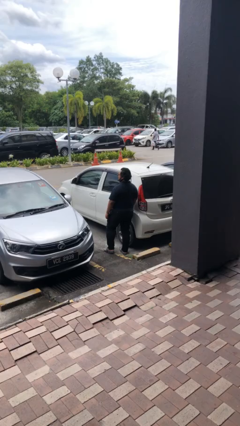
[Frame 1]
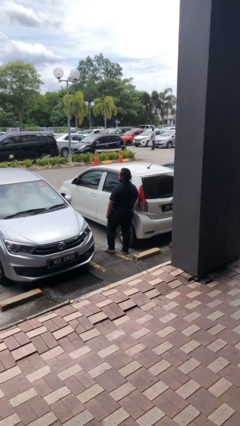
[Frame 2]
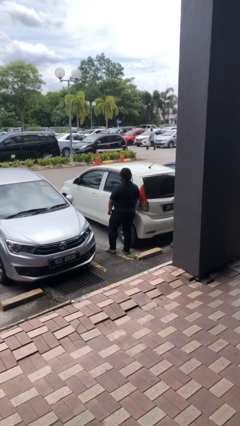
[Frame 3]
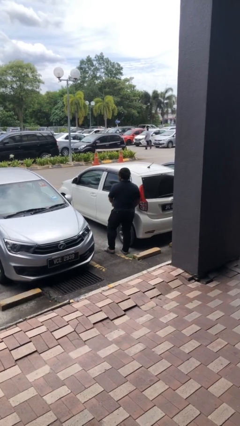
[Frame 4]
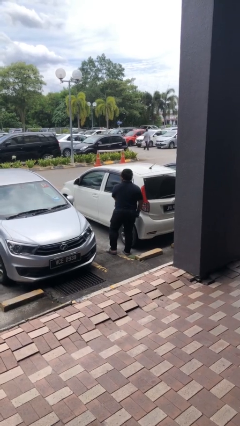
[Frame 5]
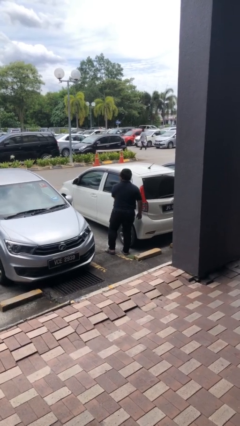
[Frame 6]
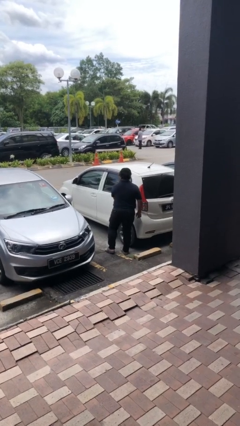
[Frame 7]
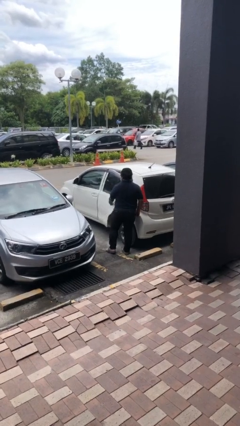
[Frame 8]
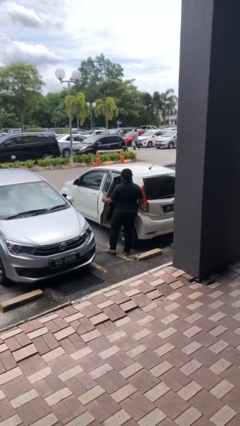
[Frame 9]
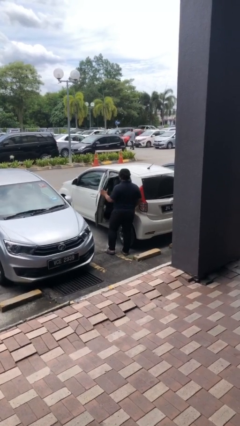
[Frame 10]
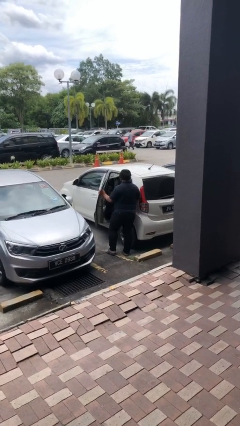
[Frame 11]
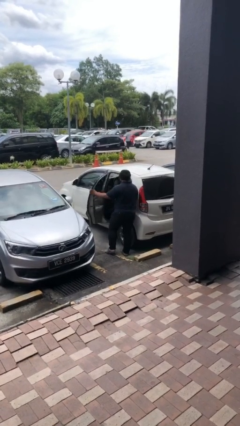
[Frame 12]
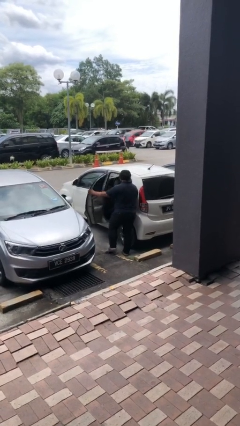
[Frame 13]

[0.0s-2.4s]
person opens car door

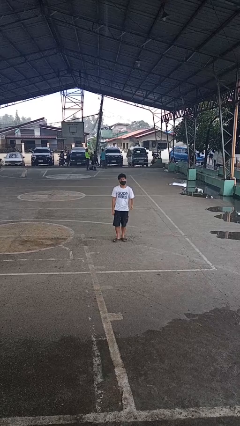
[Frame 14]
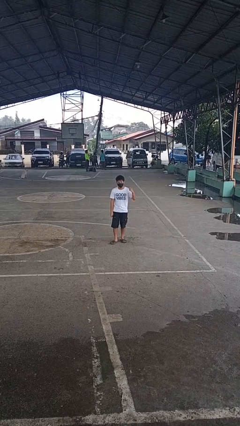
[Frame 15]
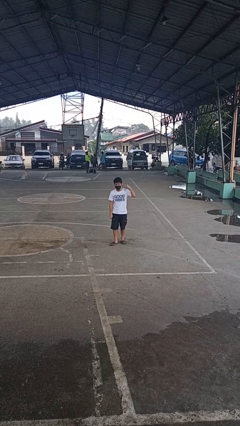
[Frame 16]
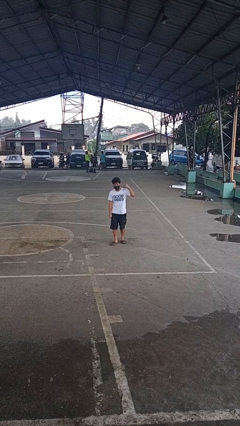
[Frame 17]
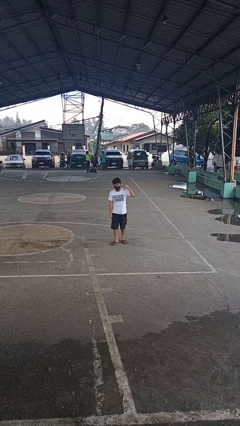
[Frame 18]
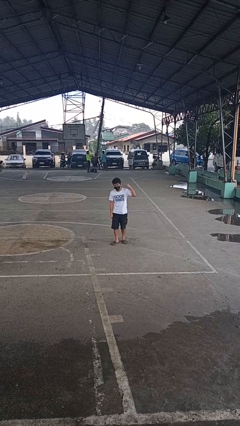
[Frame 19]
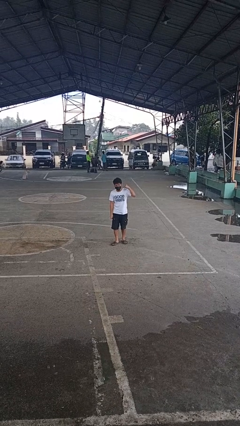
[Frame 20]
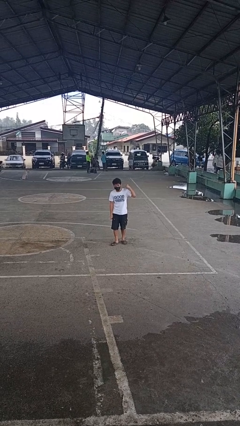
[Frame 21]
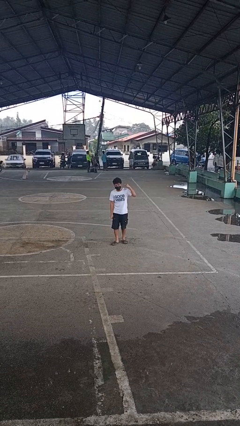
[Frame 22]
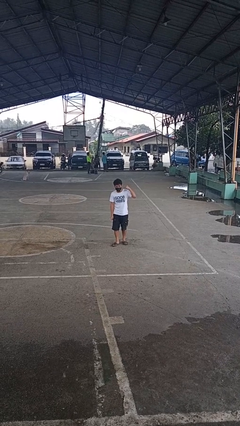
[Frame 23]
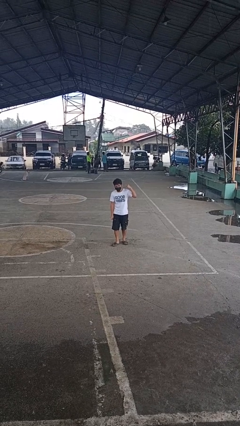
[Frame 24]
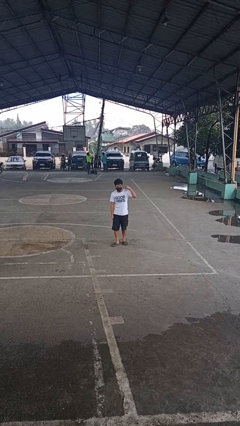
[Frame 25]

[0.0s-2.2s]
person gestures listen closely

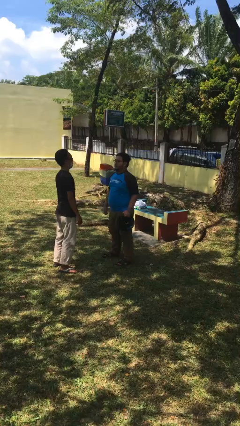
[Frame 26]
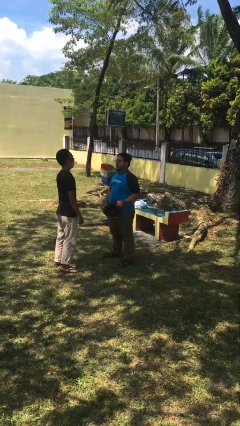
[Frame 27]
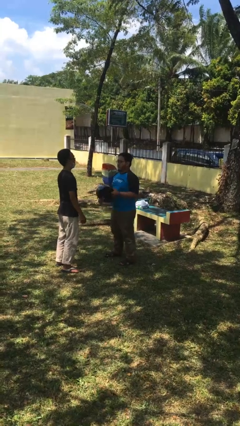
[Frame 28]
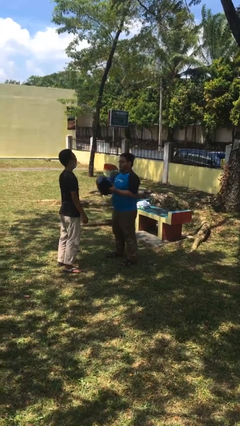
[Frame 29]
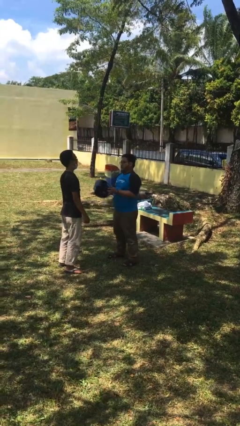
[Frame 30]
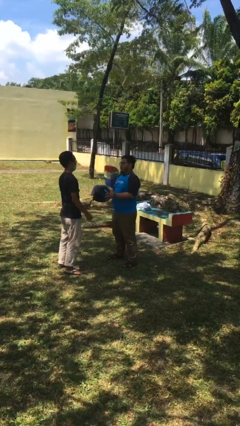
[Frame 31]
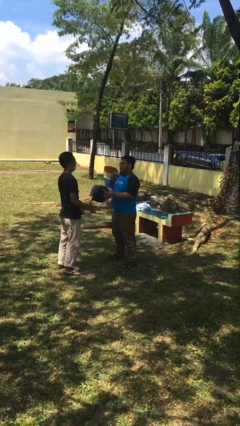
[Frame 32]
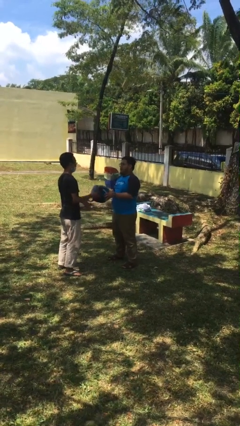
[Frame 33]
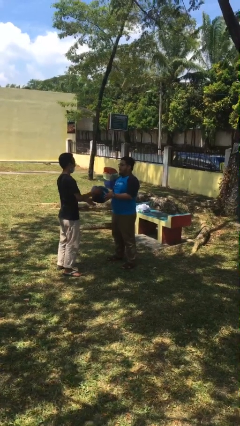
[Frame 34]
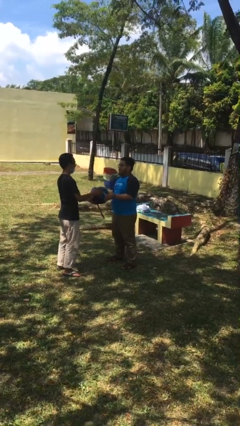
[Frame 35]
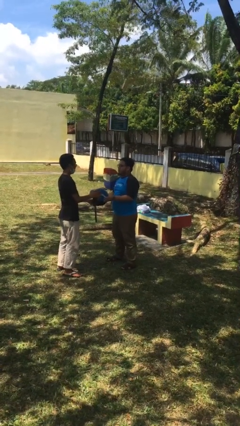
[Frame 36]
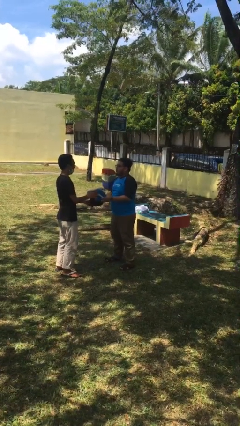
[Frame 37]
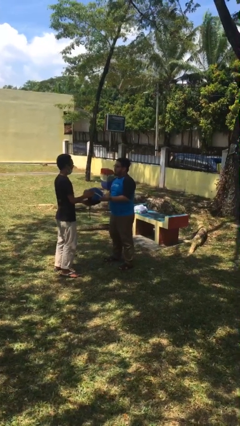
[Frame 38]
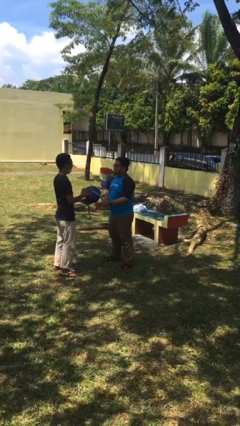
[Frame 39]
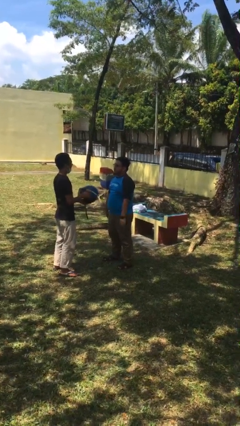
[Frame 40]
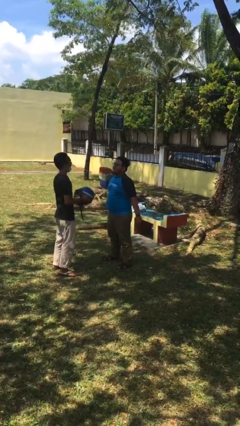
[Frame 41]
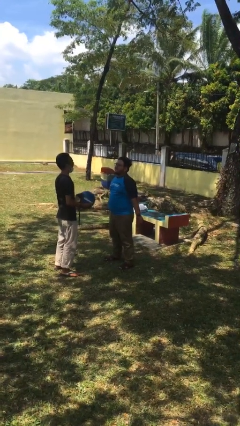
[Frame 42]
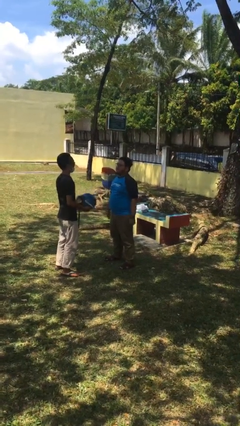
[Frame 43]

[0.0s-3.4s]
person transfers object to person

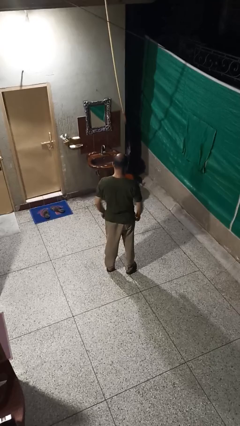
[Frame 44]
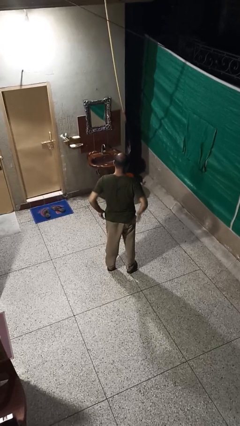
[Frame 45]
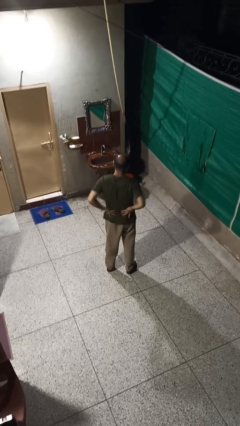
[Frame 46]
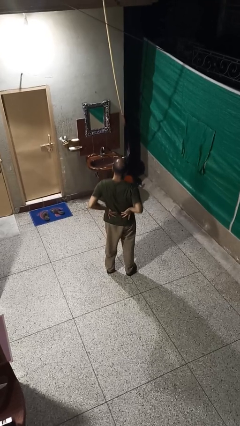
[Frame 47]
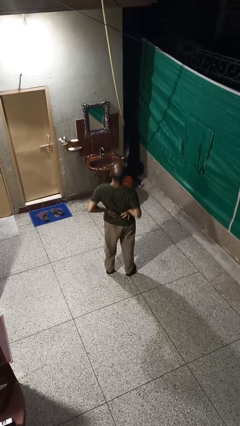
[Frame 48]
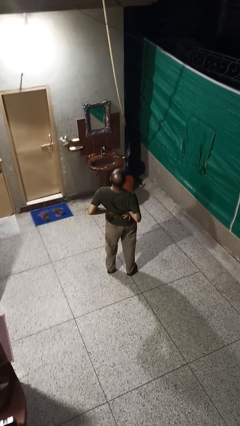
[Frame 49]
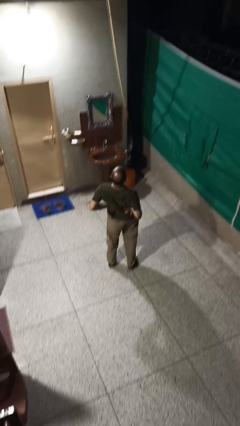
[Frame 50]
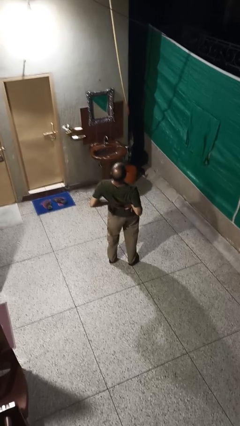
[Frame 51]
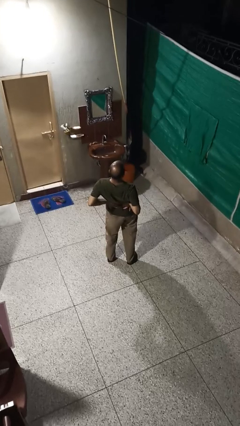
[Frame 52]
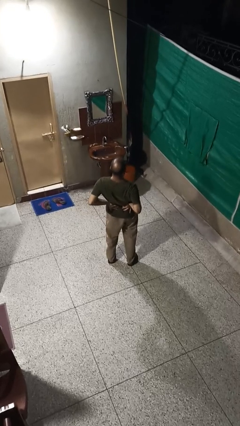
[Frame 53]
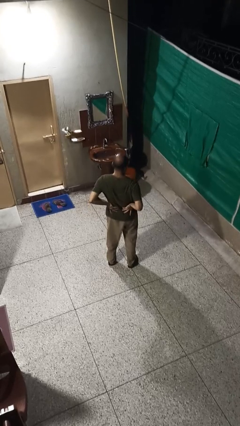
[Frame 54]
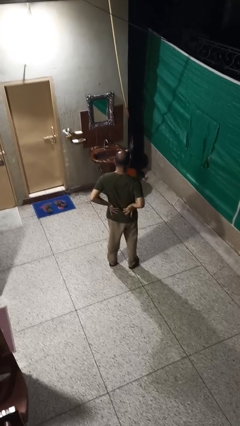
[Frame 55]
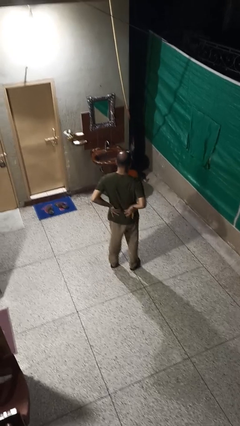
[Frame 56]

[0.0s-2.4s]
person stretches back

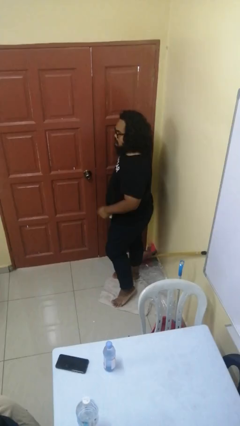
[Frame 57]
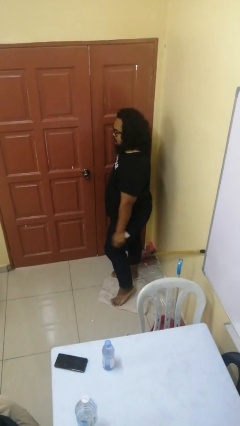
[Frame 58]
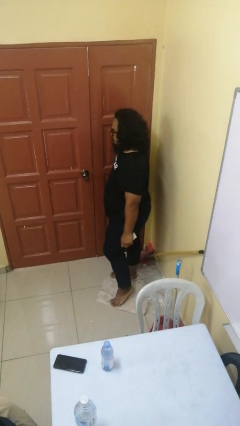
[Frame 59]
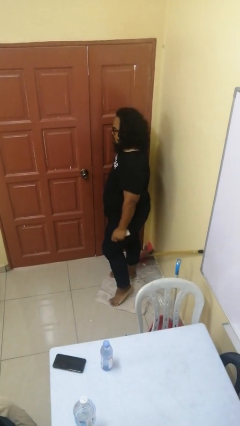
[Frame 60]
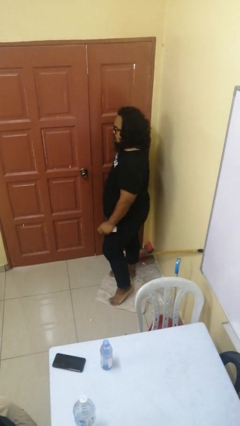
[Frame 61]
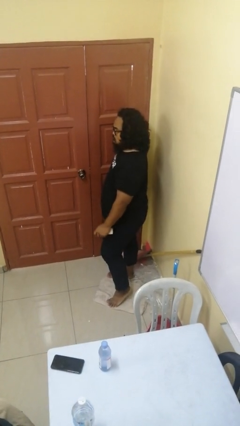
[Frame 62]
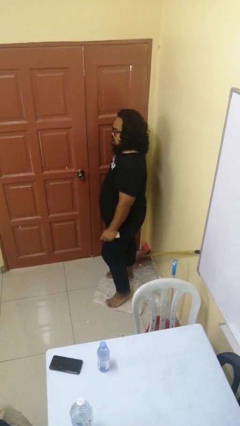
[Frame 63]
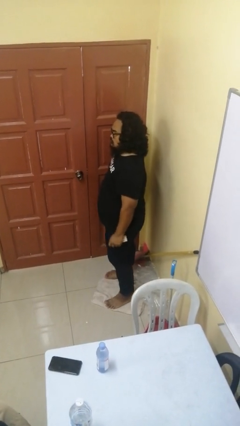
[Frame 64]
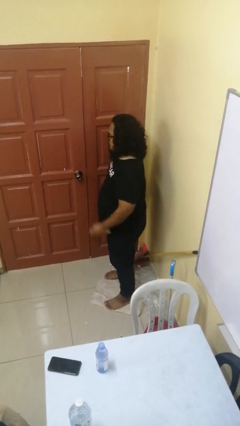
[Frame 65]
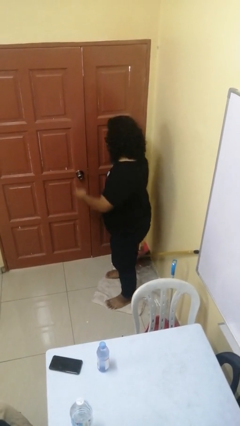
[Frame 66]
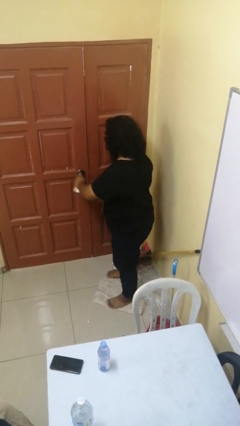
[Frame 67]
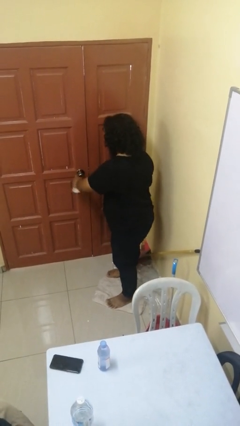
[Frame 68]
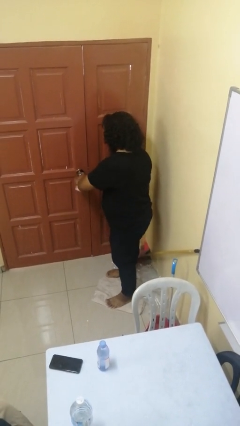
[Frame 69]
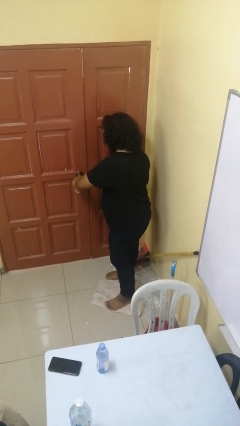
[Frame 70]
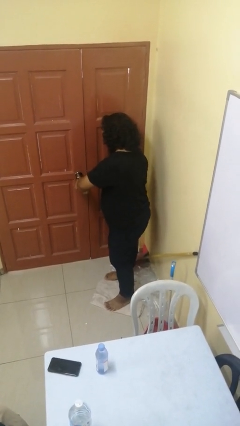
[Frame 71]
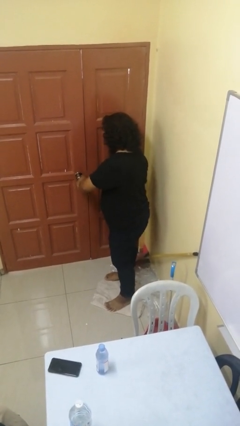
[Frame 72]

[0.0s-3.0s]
person unlocks door with keys

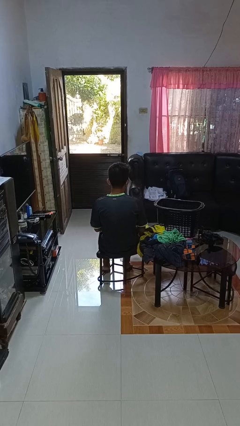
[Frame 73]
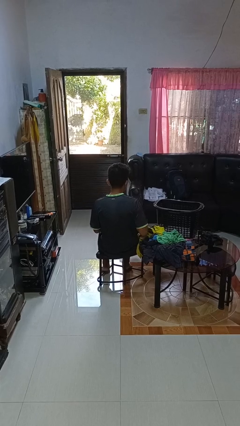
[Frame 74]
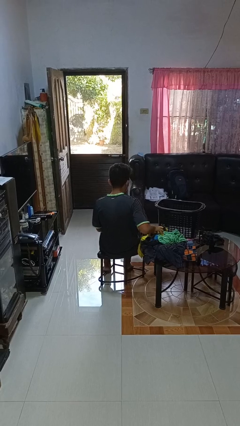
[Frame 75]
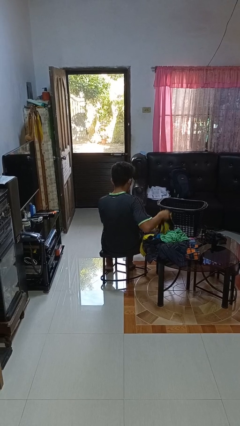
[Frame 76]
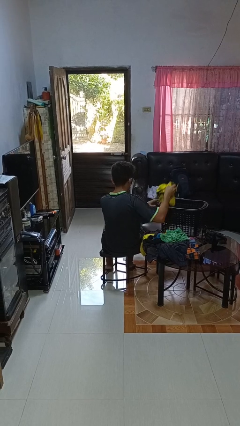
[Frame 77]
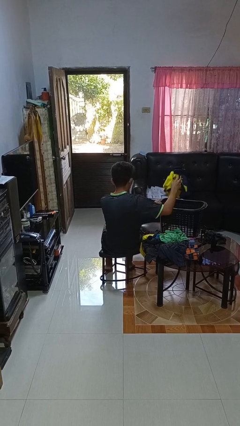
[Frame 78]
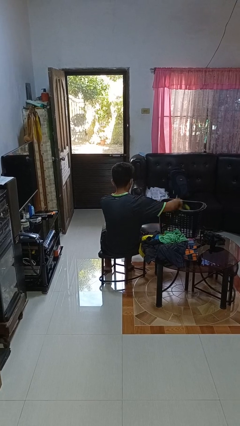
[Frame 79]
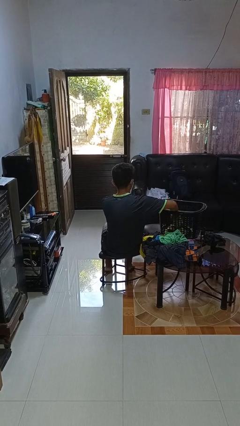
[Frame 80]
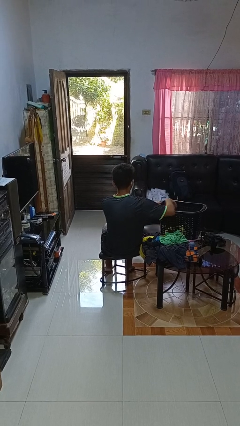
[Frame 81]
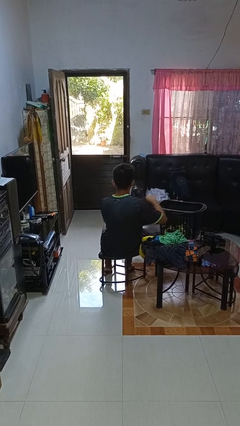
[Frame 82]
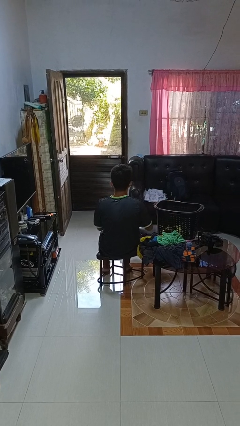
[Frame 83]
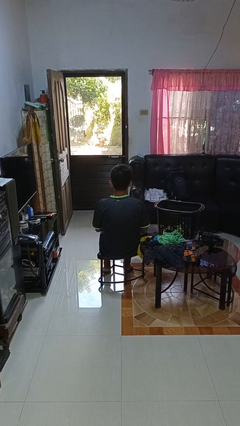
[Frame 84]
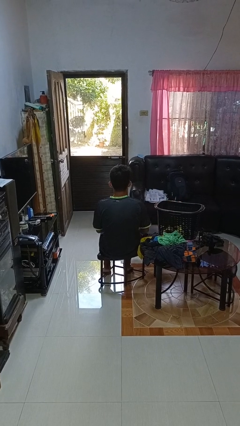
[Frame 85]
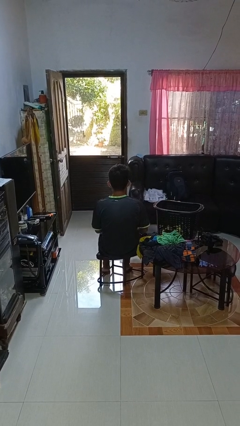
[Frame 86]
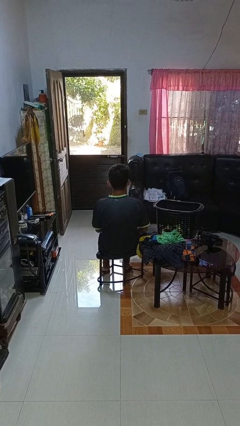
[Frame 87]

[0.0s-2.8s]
person puts object into basket

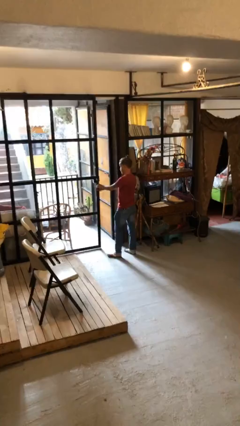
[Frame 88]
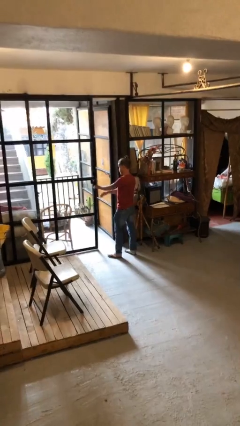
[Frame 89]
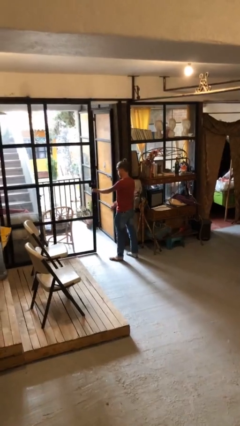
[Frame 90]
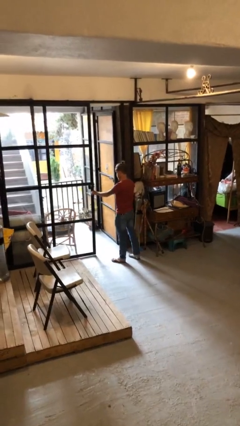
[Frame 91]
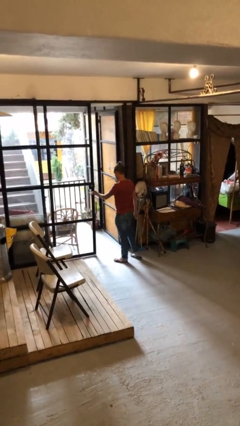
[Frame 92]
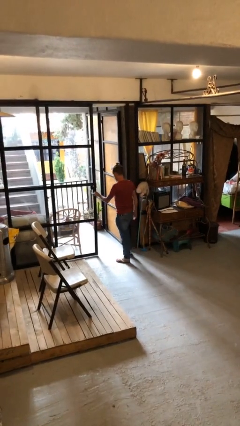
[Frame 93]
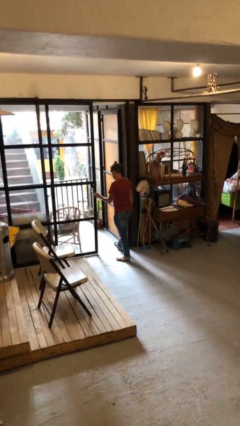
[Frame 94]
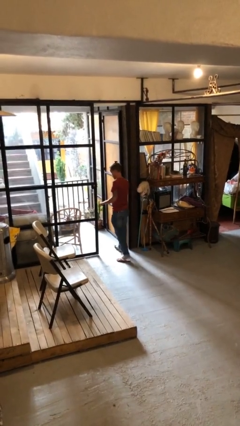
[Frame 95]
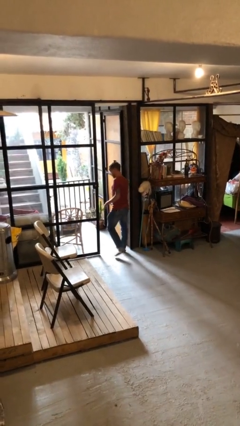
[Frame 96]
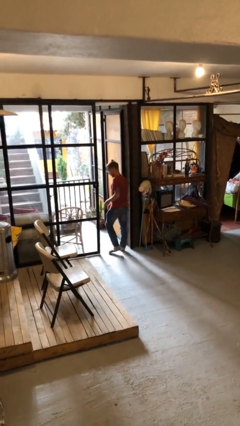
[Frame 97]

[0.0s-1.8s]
person exits scene through structure
